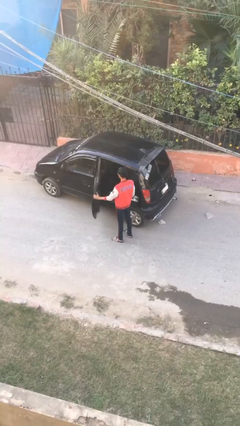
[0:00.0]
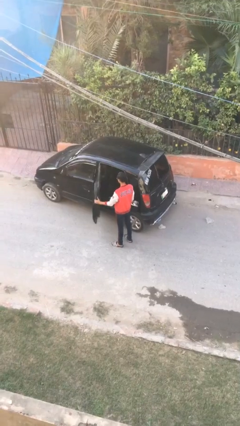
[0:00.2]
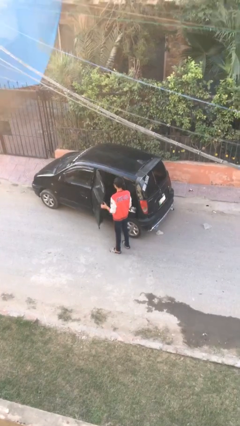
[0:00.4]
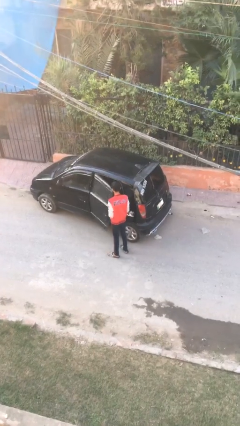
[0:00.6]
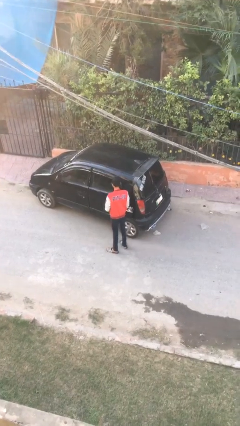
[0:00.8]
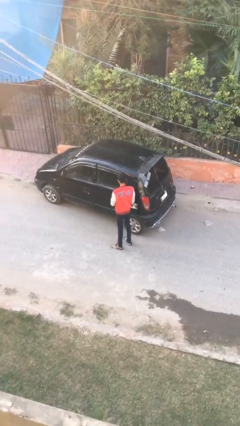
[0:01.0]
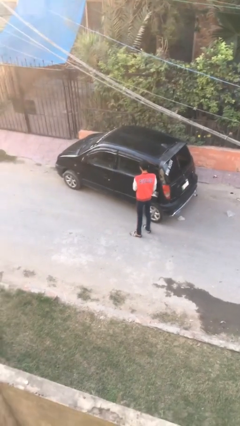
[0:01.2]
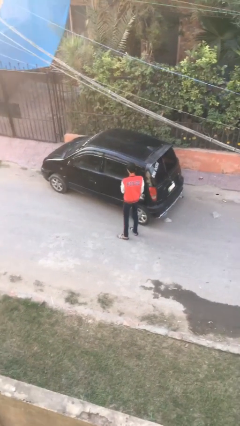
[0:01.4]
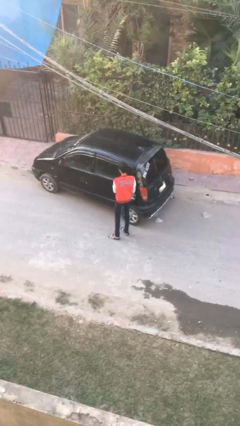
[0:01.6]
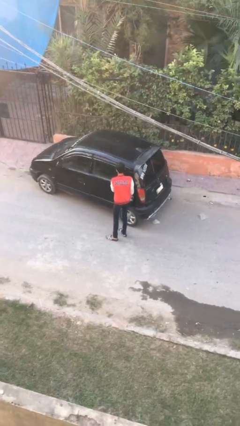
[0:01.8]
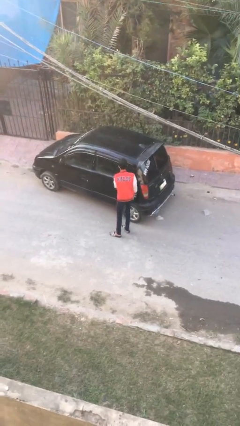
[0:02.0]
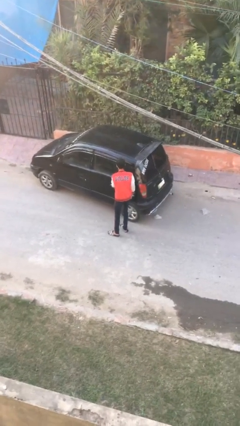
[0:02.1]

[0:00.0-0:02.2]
person closes car door

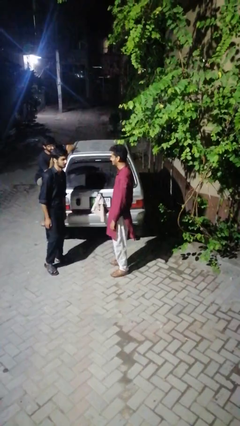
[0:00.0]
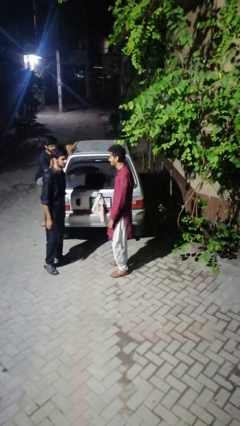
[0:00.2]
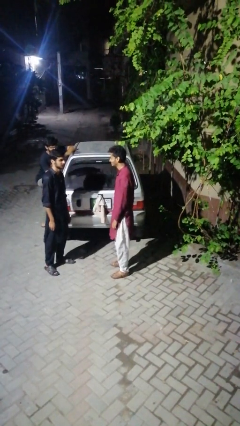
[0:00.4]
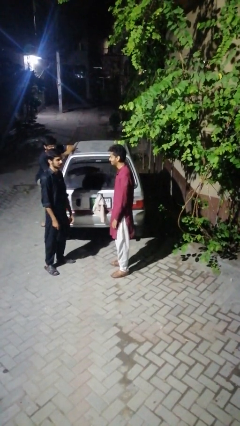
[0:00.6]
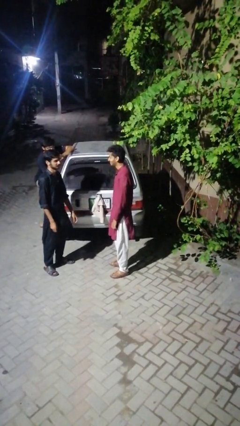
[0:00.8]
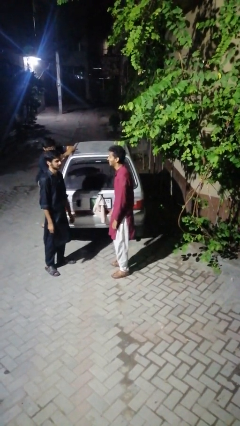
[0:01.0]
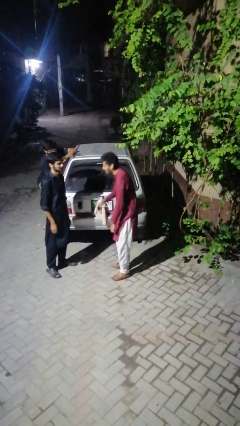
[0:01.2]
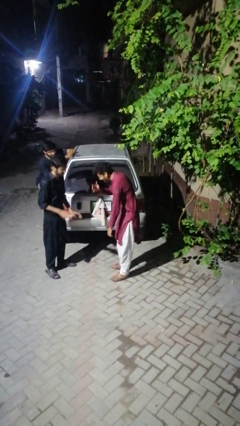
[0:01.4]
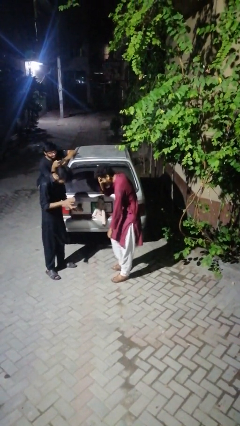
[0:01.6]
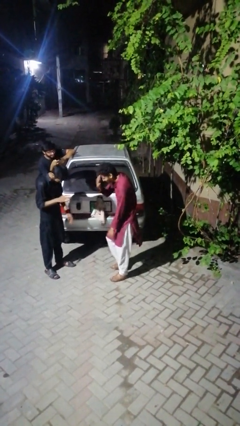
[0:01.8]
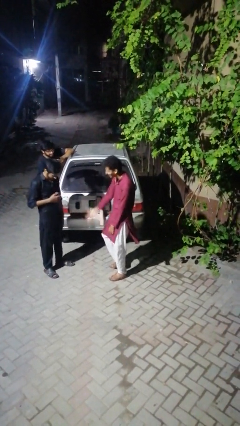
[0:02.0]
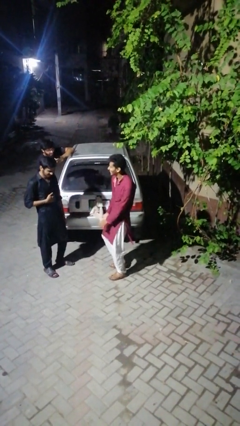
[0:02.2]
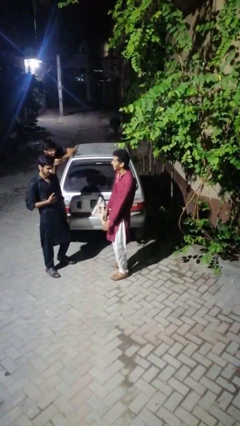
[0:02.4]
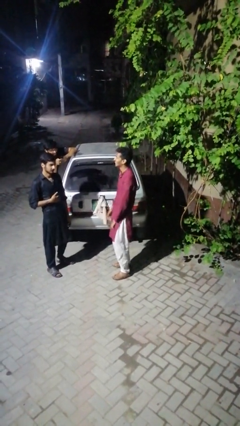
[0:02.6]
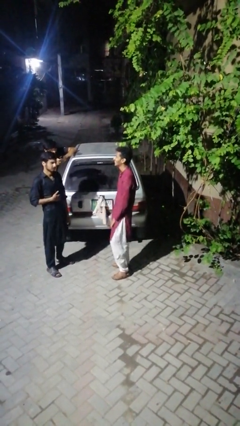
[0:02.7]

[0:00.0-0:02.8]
person laughs with person

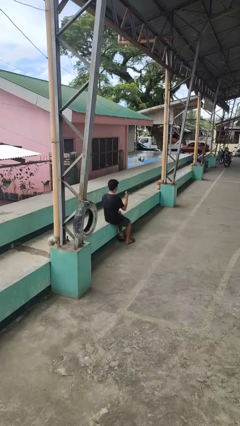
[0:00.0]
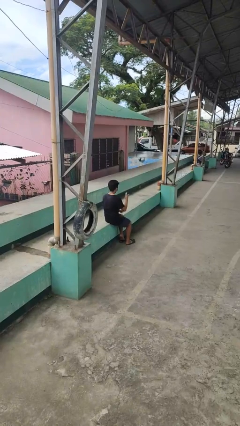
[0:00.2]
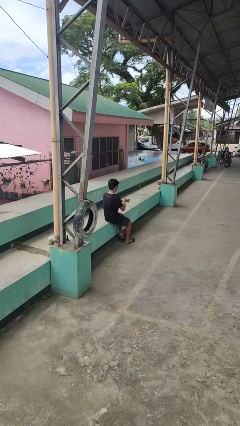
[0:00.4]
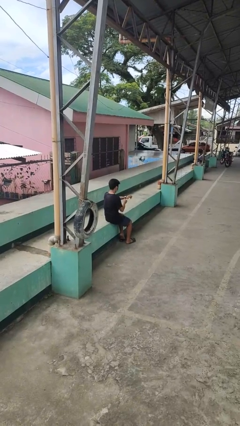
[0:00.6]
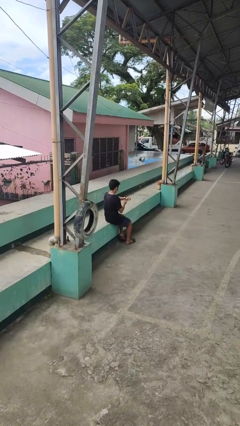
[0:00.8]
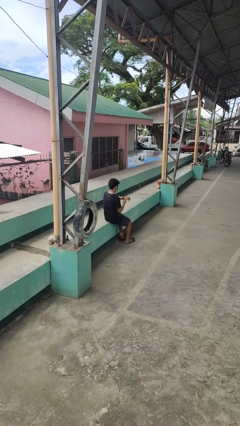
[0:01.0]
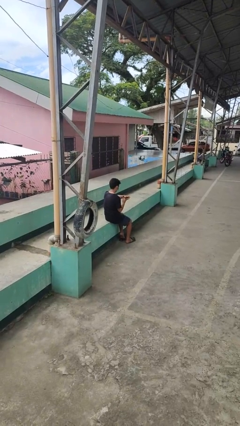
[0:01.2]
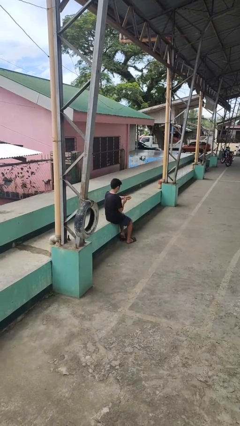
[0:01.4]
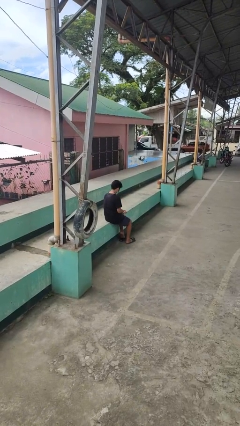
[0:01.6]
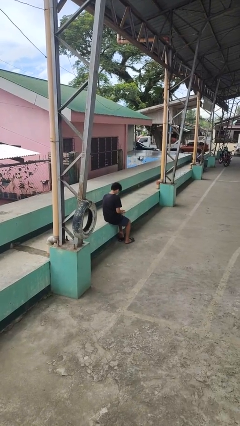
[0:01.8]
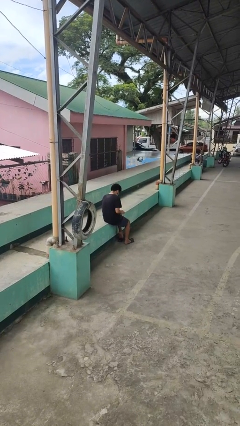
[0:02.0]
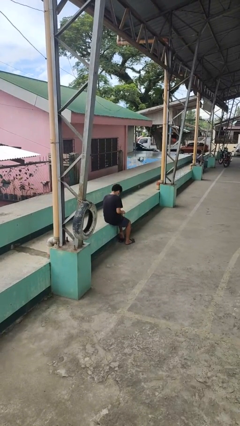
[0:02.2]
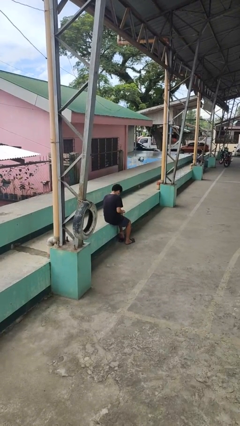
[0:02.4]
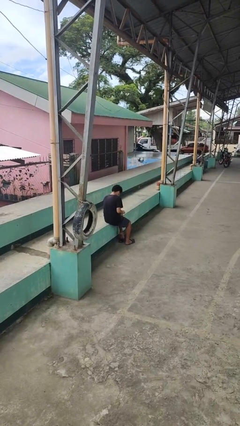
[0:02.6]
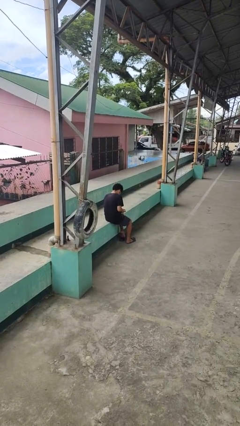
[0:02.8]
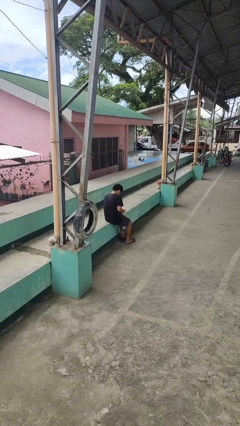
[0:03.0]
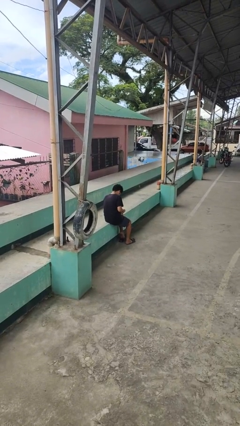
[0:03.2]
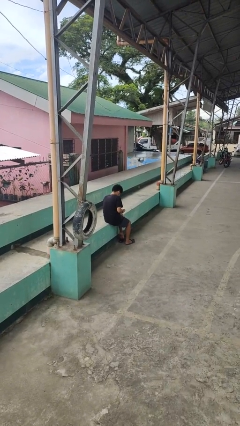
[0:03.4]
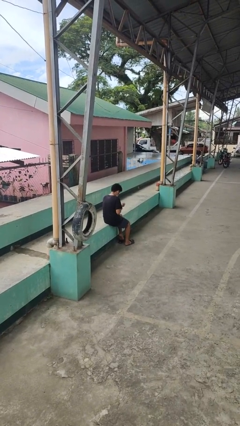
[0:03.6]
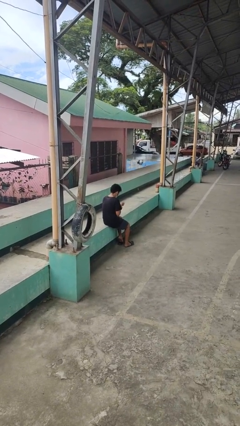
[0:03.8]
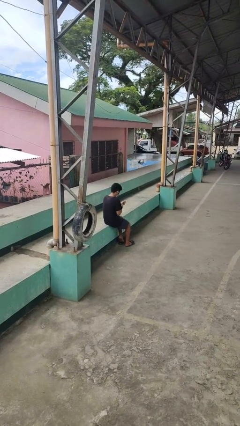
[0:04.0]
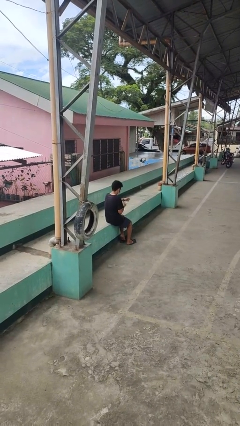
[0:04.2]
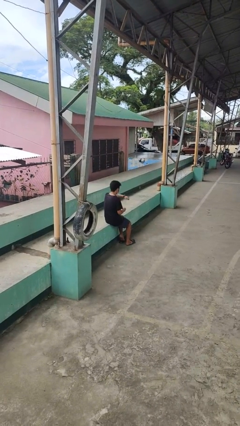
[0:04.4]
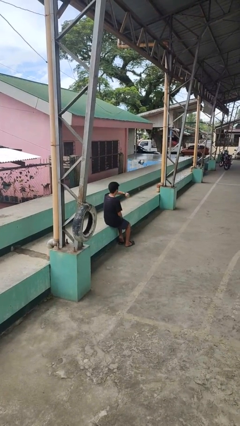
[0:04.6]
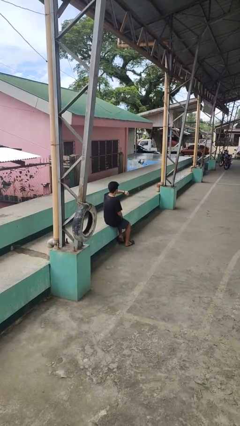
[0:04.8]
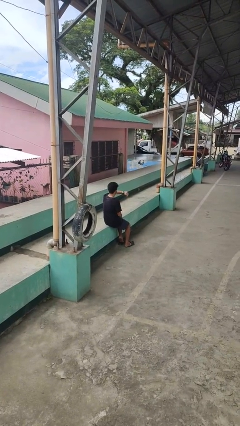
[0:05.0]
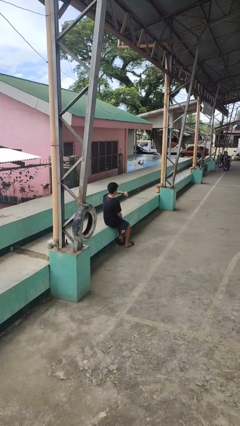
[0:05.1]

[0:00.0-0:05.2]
person puts on wristwatch

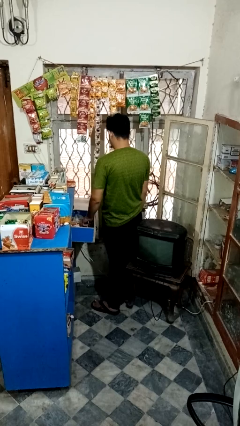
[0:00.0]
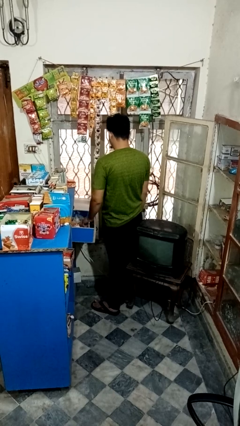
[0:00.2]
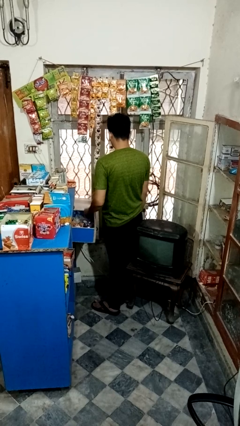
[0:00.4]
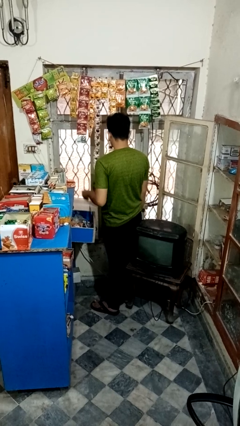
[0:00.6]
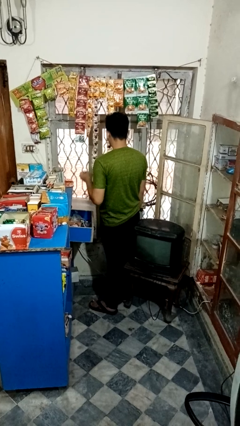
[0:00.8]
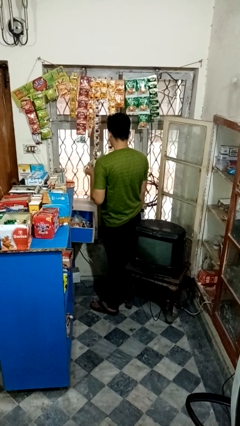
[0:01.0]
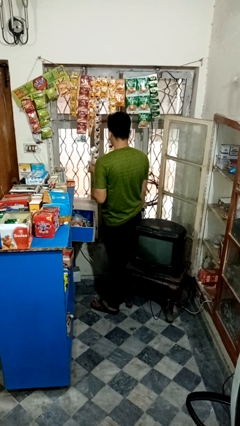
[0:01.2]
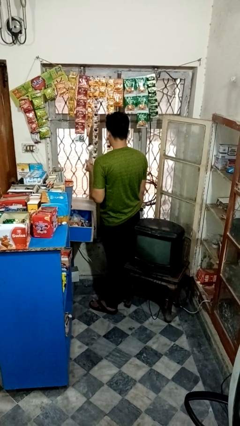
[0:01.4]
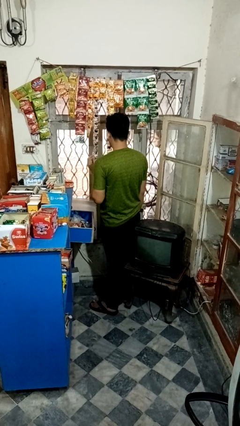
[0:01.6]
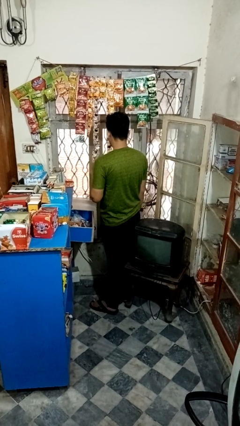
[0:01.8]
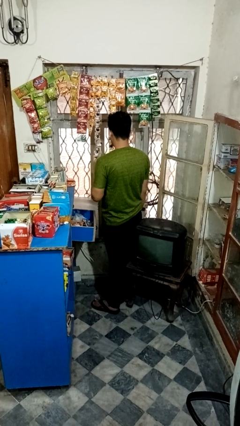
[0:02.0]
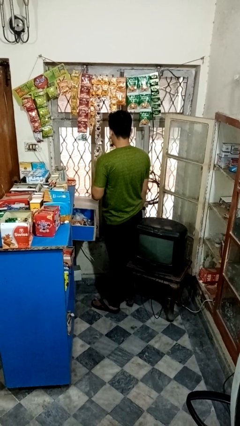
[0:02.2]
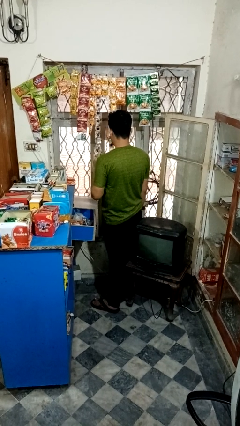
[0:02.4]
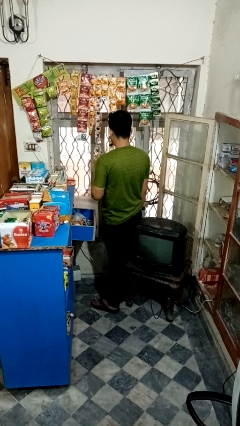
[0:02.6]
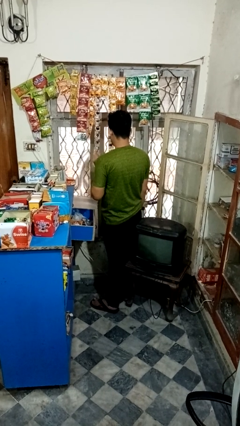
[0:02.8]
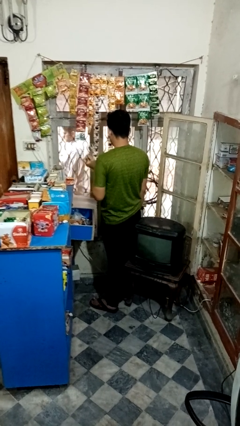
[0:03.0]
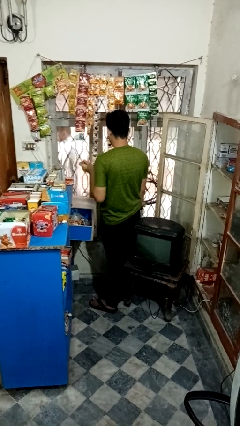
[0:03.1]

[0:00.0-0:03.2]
person takes object from kitchen drawer

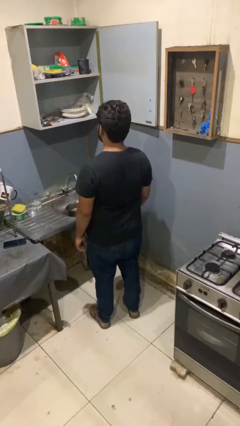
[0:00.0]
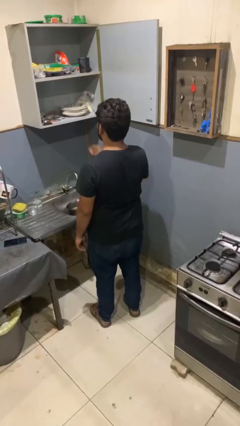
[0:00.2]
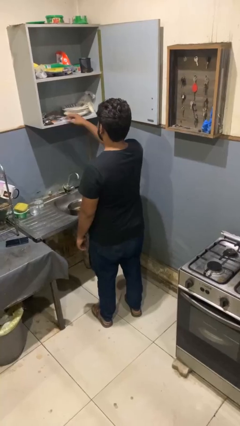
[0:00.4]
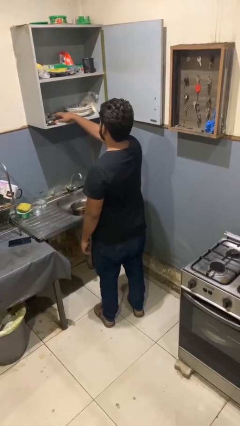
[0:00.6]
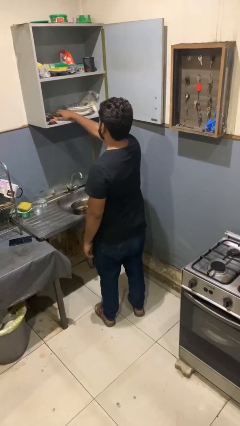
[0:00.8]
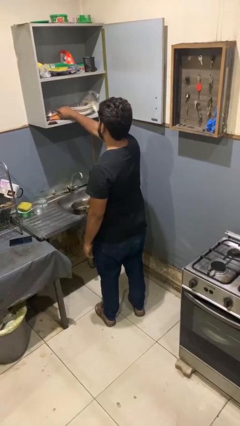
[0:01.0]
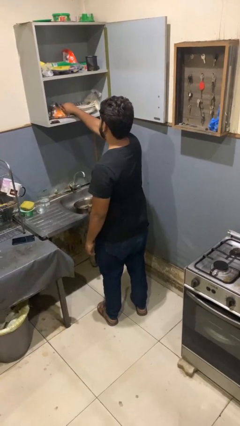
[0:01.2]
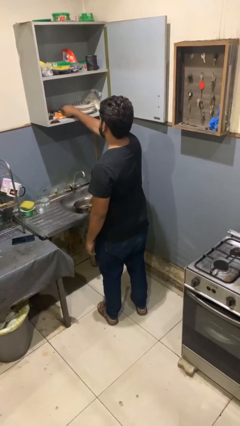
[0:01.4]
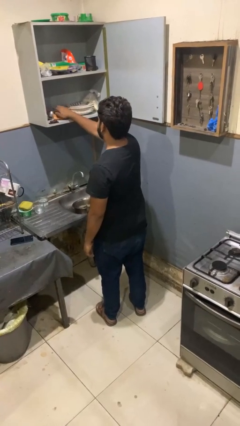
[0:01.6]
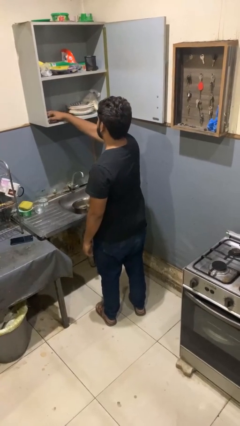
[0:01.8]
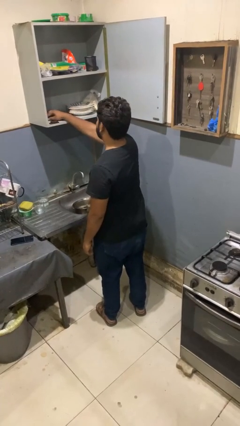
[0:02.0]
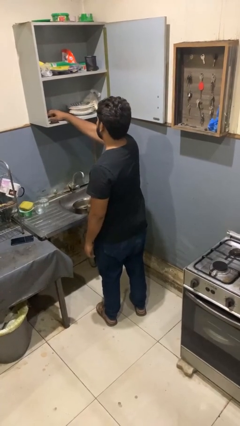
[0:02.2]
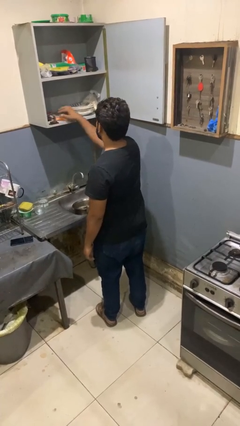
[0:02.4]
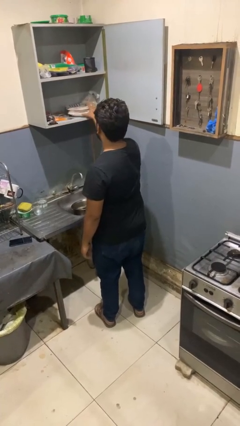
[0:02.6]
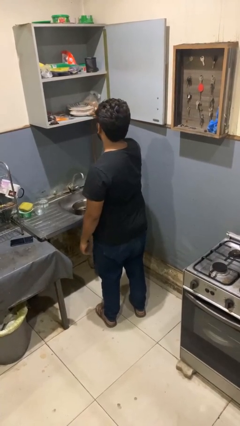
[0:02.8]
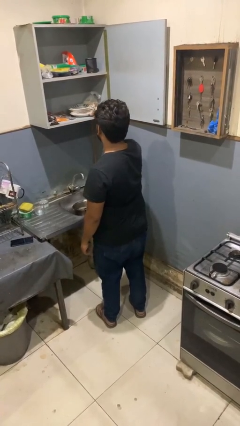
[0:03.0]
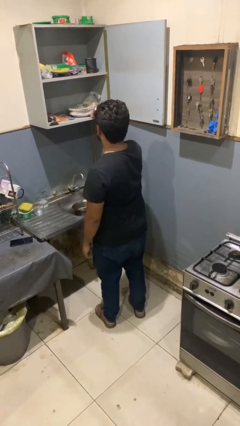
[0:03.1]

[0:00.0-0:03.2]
person searches in kitchen drawer

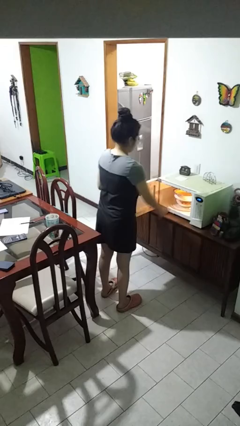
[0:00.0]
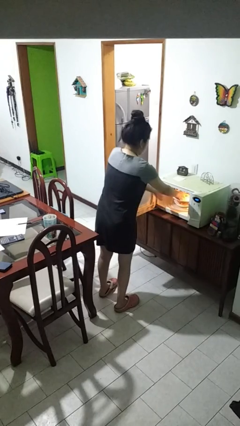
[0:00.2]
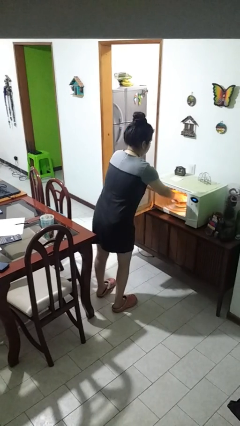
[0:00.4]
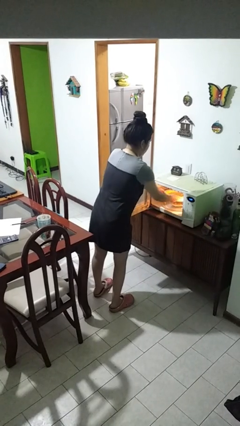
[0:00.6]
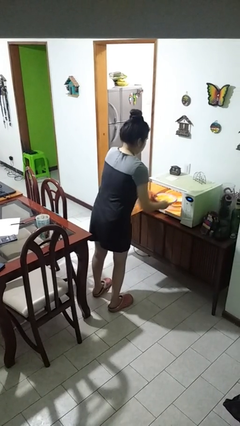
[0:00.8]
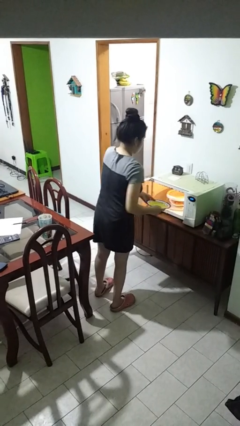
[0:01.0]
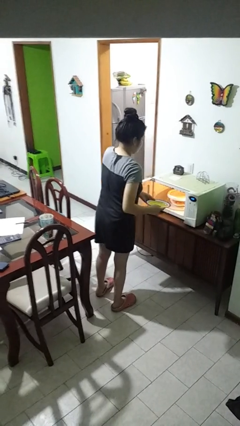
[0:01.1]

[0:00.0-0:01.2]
person takes object from microwave
